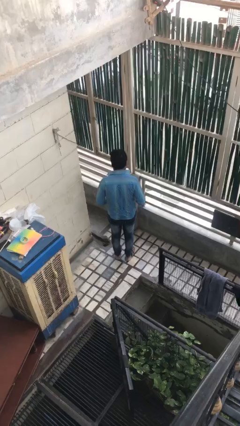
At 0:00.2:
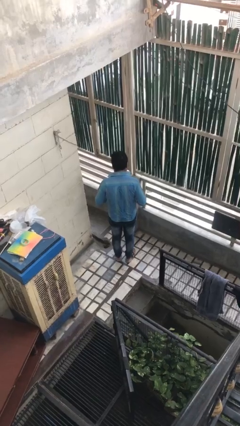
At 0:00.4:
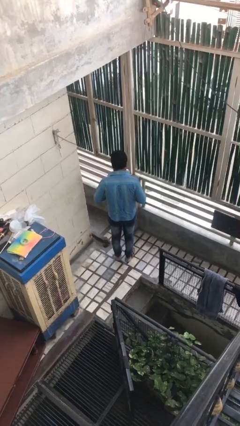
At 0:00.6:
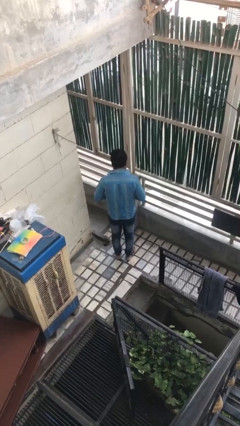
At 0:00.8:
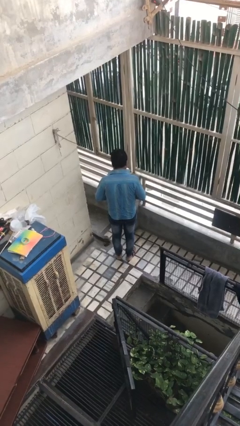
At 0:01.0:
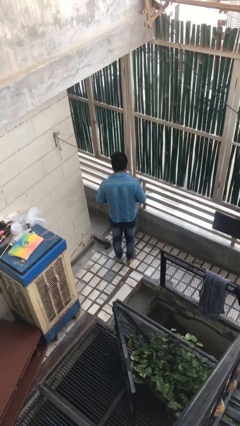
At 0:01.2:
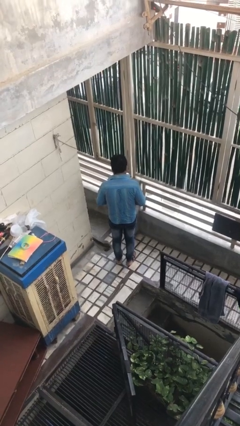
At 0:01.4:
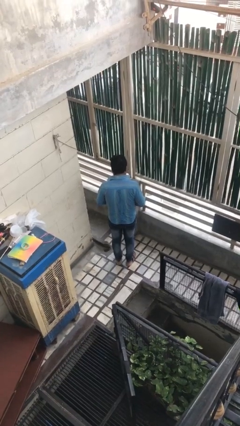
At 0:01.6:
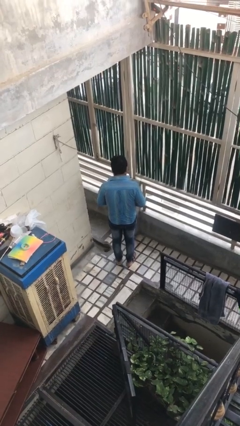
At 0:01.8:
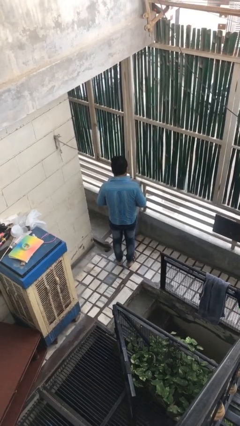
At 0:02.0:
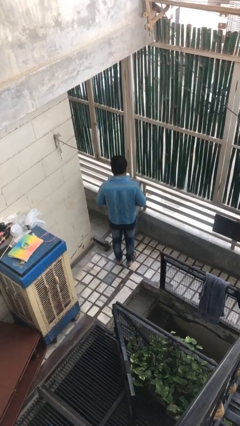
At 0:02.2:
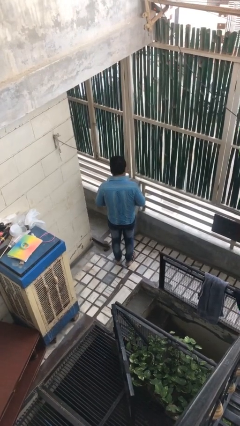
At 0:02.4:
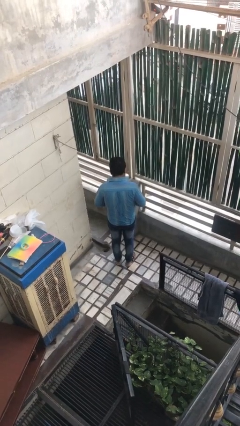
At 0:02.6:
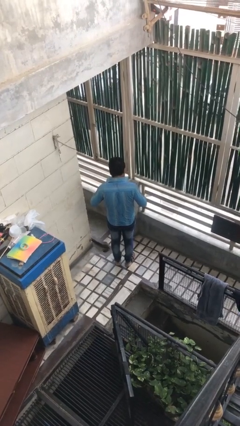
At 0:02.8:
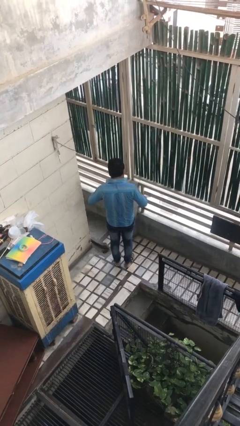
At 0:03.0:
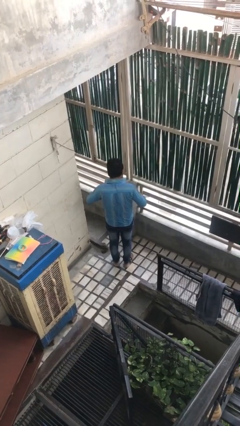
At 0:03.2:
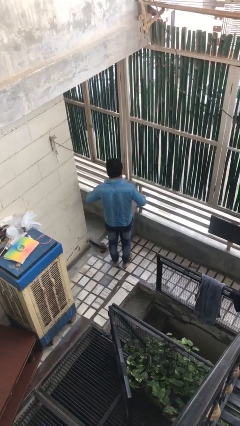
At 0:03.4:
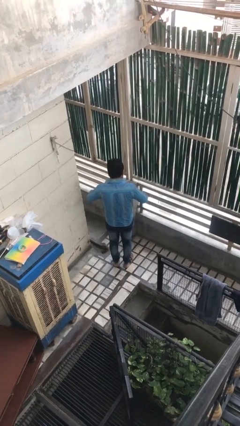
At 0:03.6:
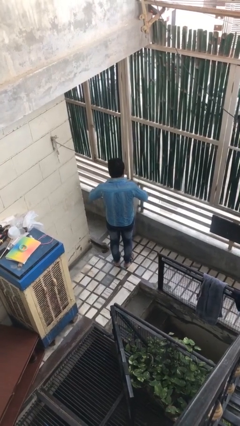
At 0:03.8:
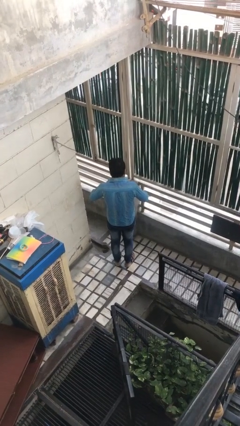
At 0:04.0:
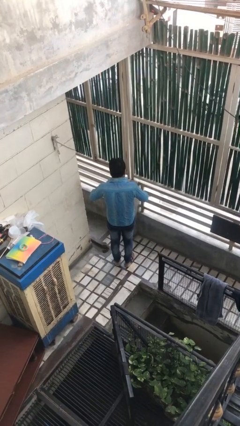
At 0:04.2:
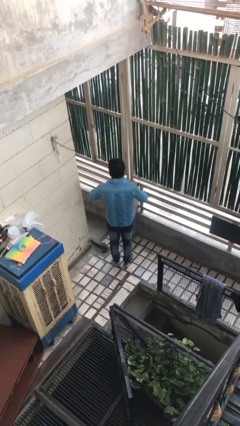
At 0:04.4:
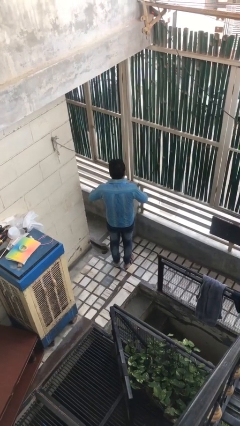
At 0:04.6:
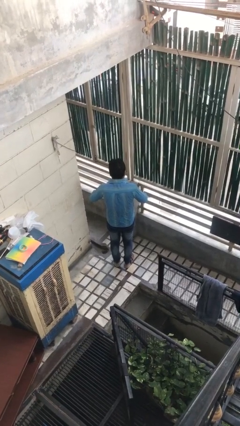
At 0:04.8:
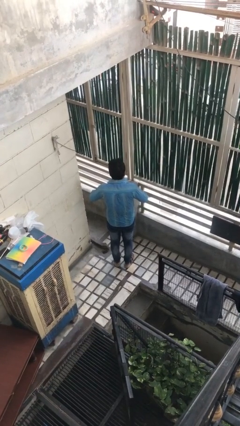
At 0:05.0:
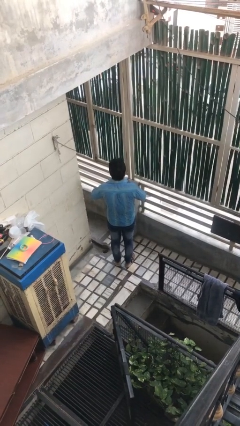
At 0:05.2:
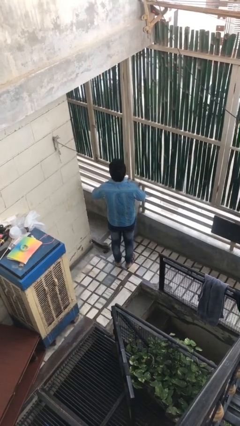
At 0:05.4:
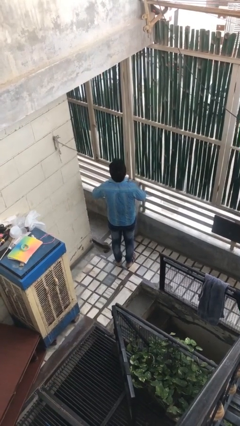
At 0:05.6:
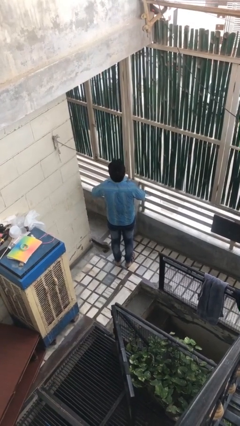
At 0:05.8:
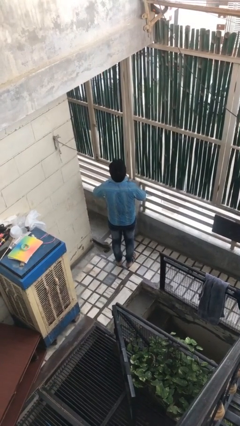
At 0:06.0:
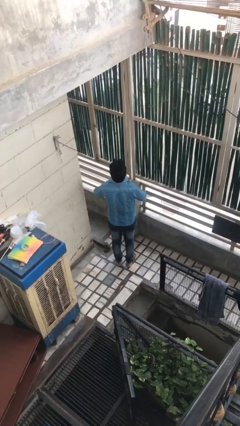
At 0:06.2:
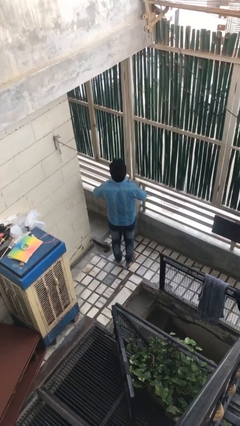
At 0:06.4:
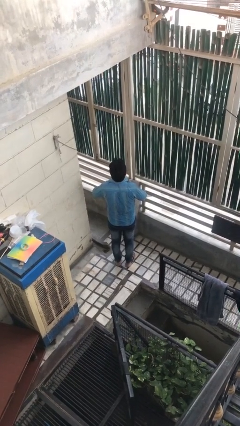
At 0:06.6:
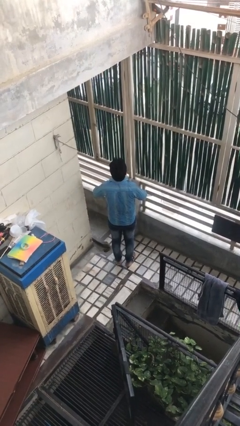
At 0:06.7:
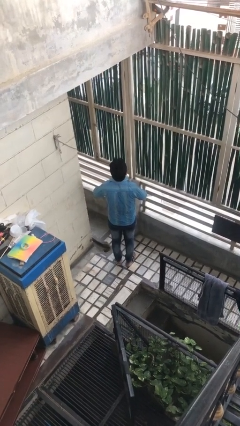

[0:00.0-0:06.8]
person buttons shirt

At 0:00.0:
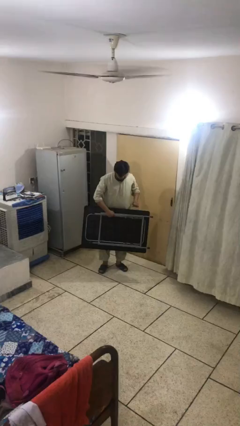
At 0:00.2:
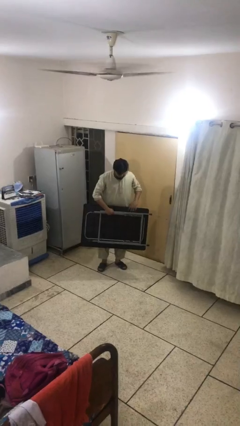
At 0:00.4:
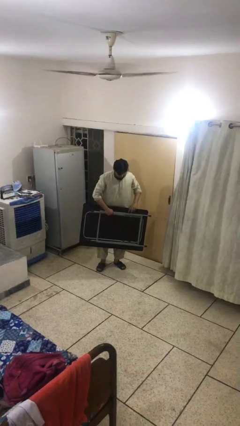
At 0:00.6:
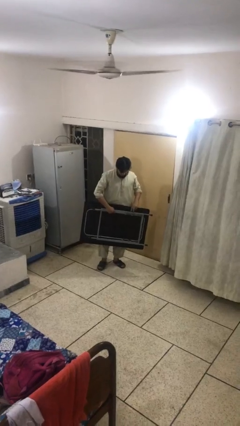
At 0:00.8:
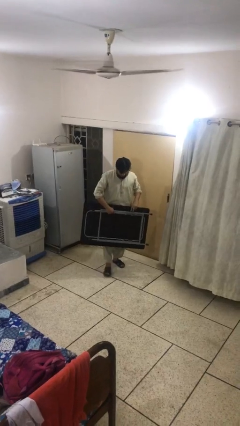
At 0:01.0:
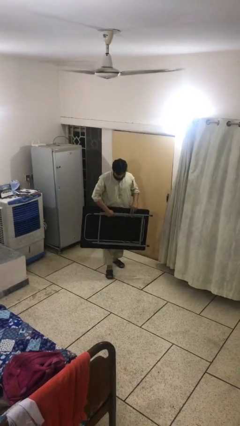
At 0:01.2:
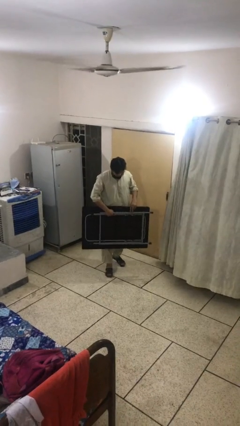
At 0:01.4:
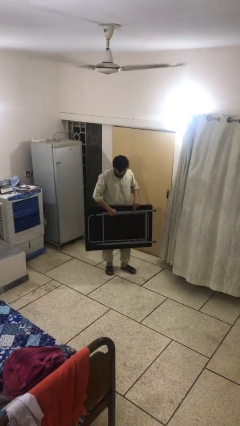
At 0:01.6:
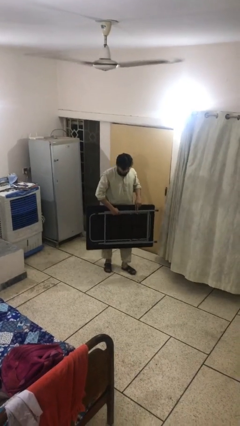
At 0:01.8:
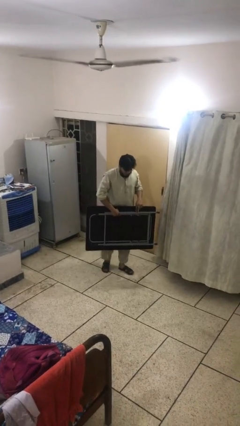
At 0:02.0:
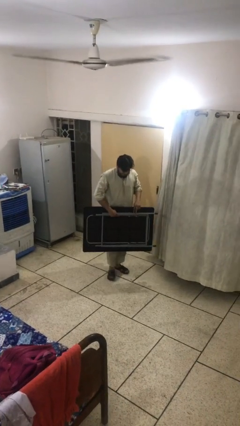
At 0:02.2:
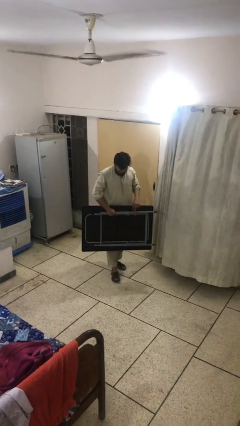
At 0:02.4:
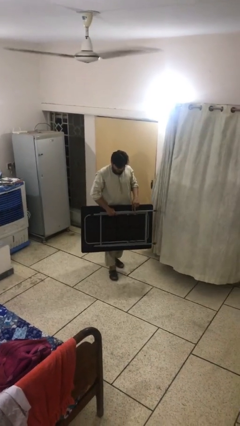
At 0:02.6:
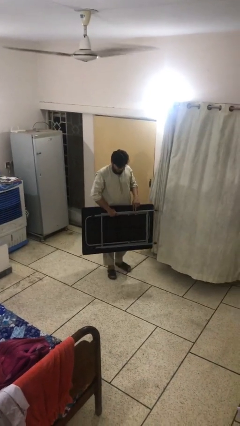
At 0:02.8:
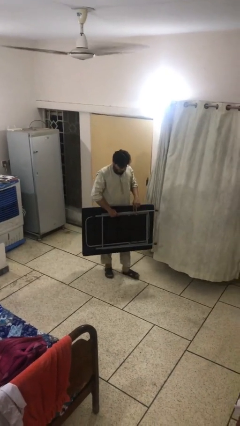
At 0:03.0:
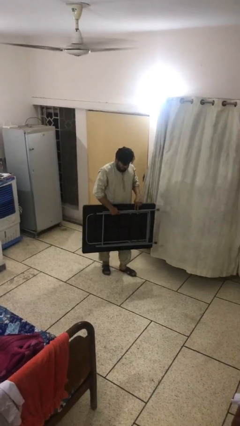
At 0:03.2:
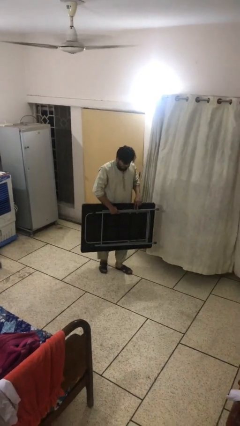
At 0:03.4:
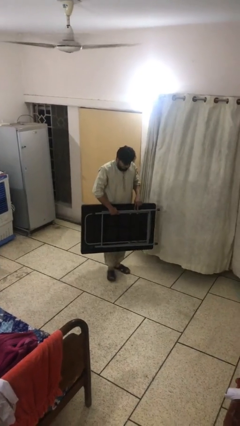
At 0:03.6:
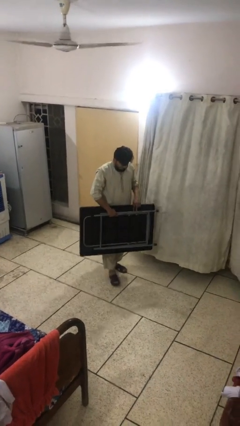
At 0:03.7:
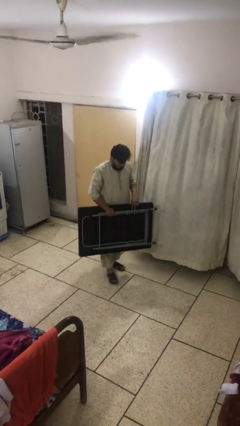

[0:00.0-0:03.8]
person carries heavy object

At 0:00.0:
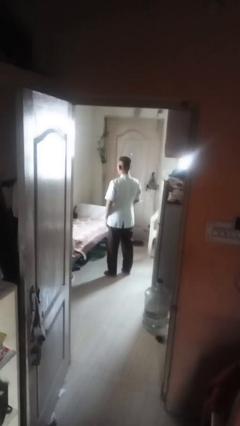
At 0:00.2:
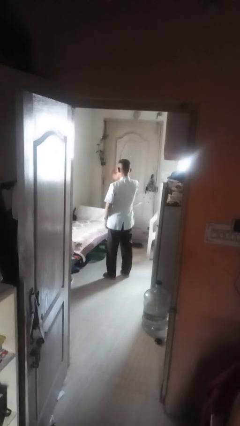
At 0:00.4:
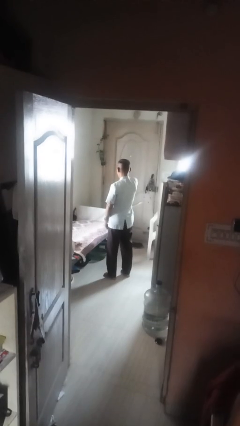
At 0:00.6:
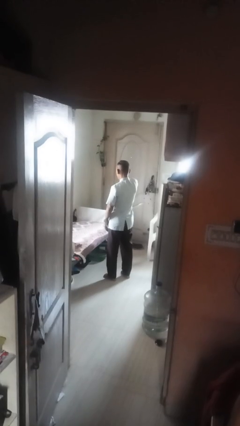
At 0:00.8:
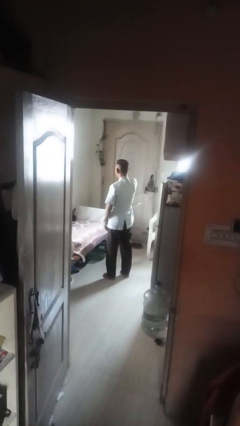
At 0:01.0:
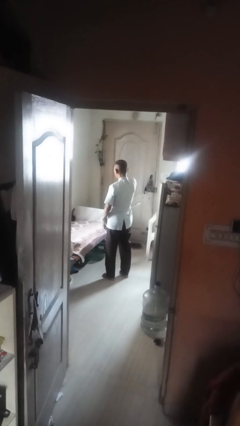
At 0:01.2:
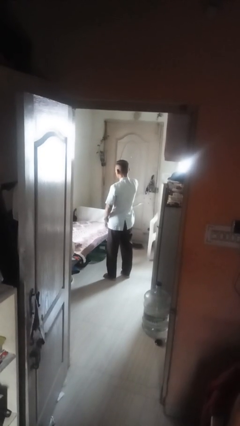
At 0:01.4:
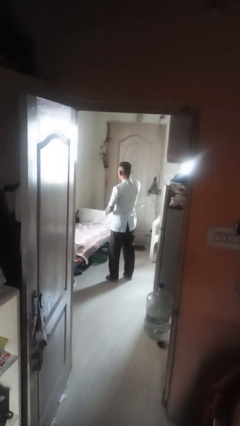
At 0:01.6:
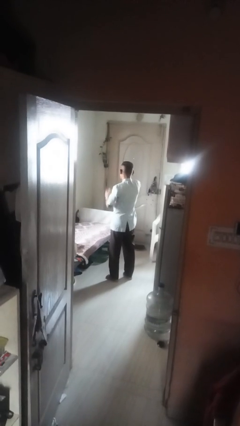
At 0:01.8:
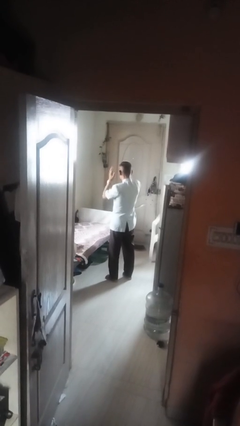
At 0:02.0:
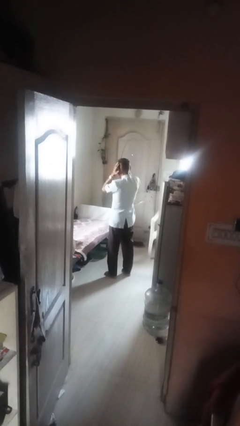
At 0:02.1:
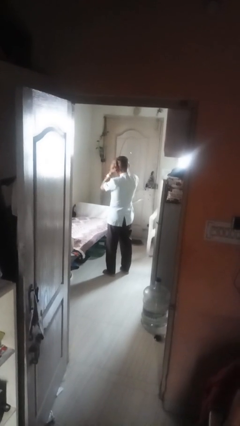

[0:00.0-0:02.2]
person strokes hair

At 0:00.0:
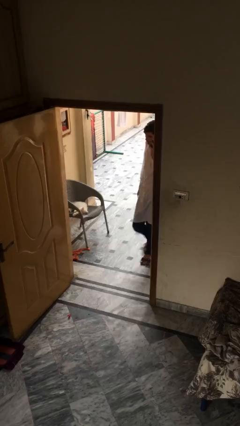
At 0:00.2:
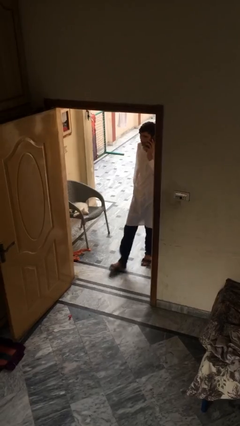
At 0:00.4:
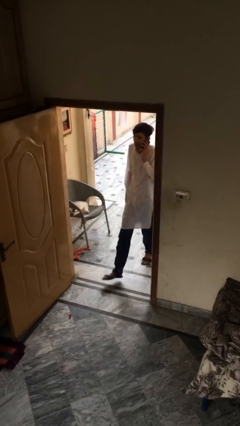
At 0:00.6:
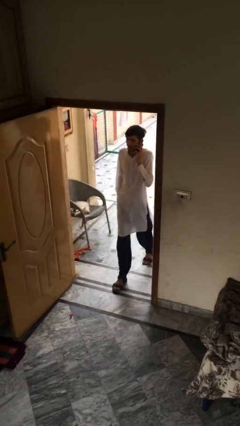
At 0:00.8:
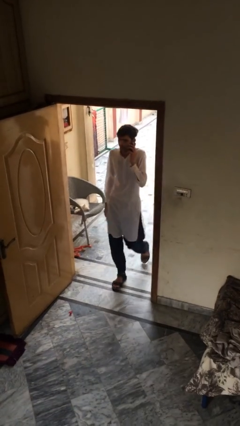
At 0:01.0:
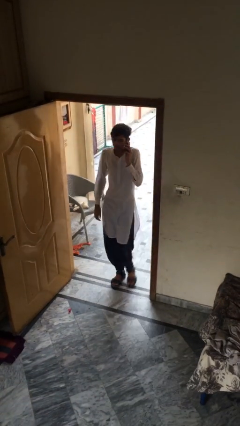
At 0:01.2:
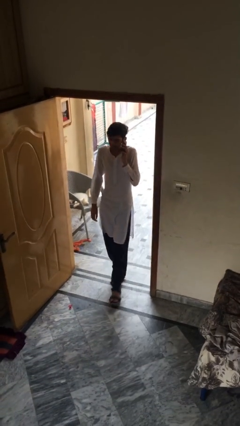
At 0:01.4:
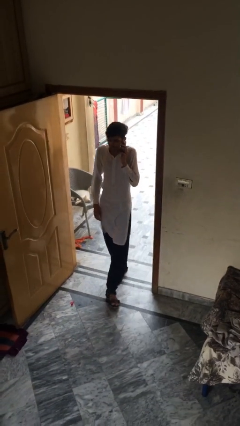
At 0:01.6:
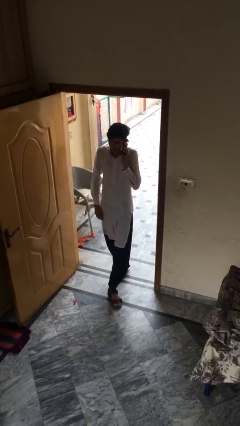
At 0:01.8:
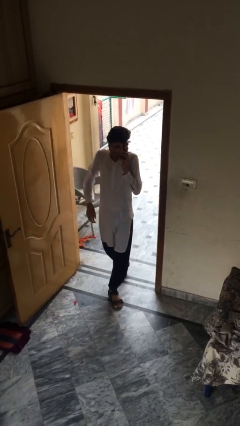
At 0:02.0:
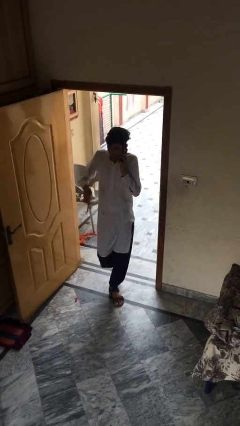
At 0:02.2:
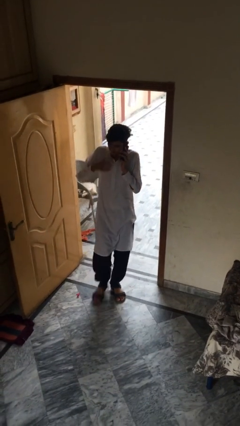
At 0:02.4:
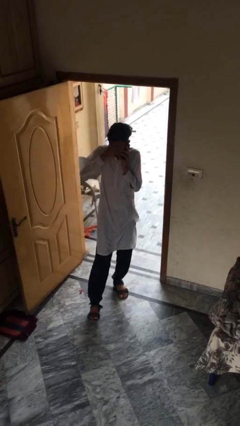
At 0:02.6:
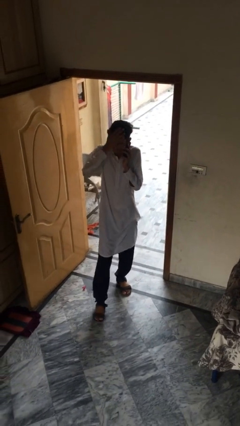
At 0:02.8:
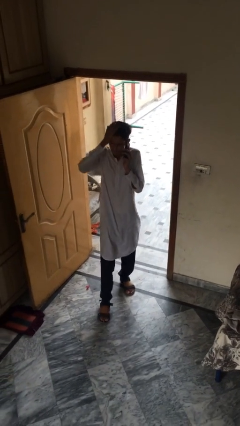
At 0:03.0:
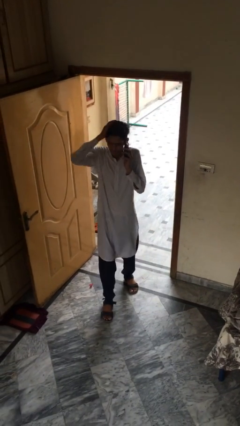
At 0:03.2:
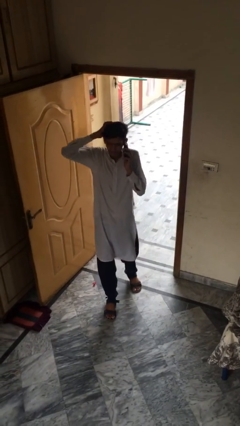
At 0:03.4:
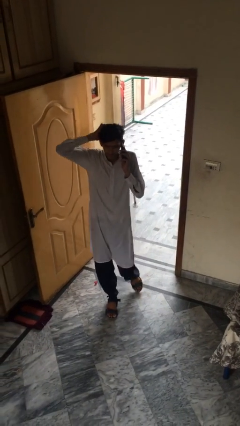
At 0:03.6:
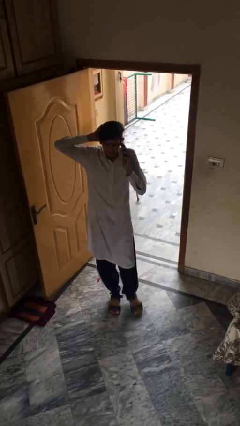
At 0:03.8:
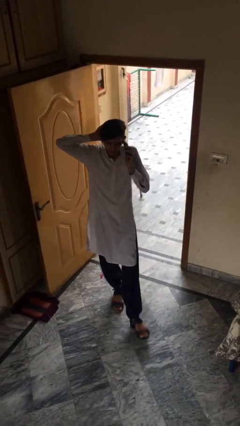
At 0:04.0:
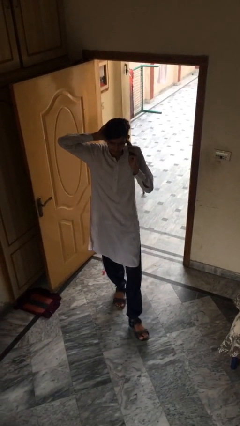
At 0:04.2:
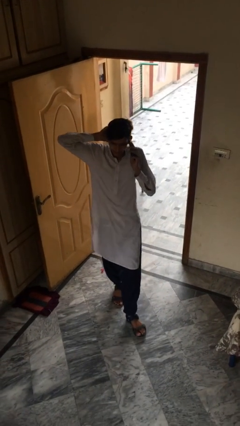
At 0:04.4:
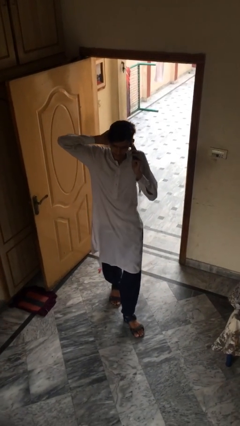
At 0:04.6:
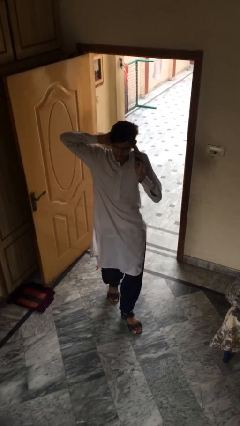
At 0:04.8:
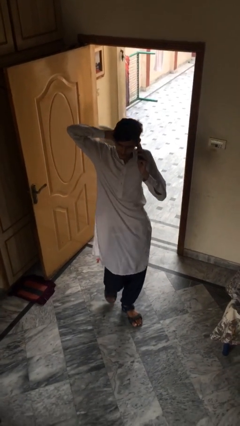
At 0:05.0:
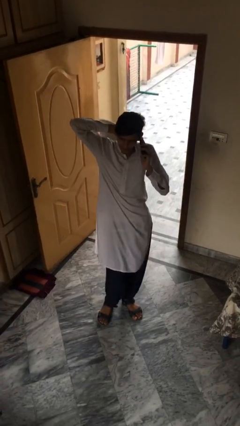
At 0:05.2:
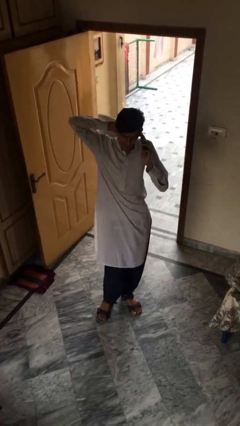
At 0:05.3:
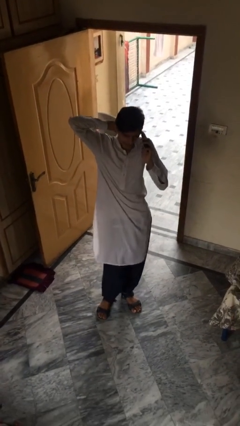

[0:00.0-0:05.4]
person enters scene through structure
